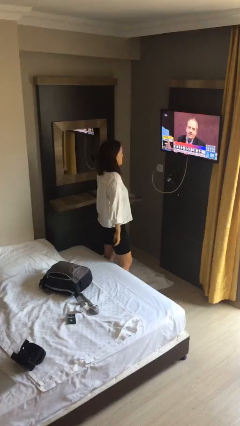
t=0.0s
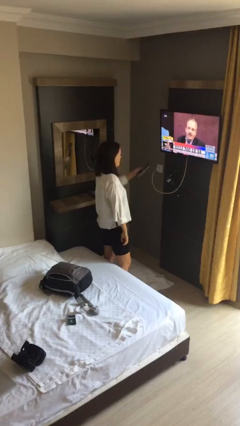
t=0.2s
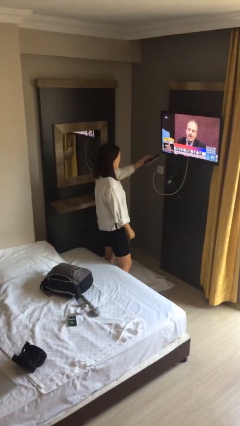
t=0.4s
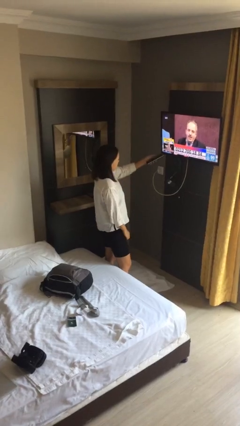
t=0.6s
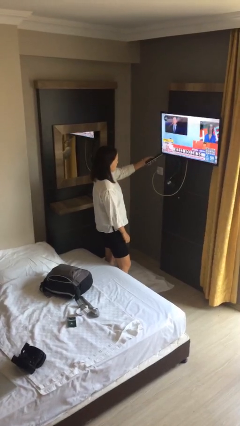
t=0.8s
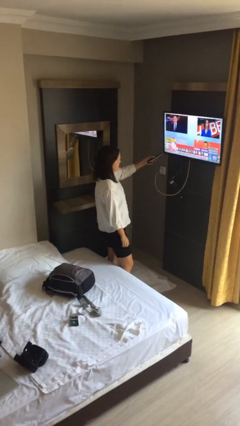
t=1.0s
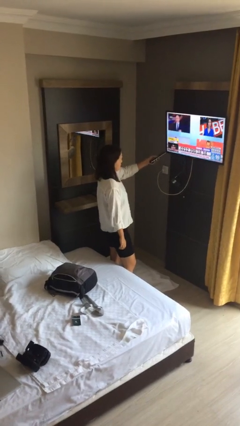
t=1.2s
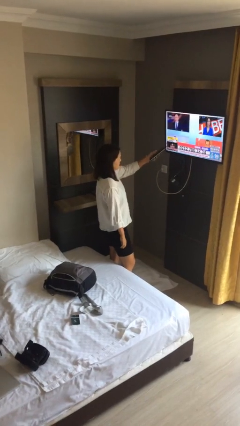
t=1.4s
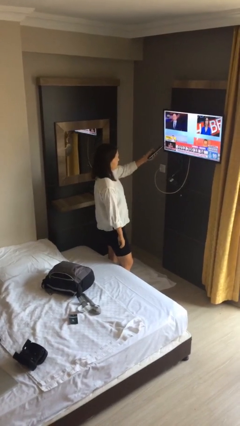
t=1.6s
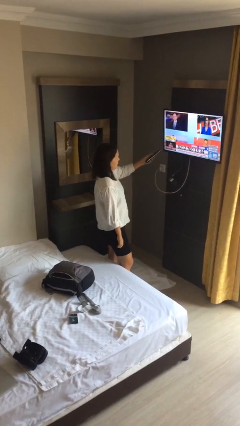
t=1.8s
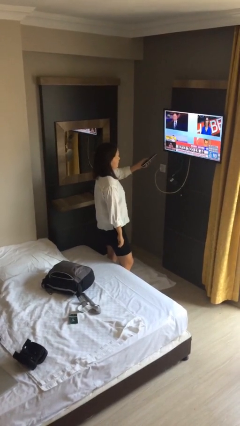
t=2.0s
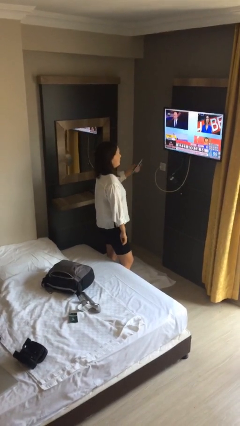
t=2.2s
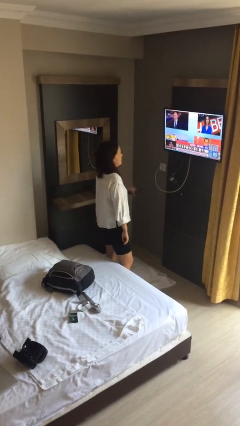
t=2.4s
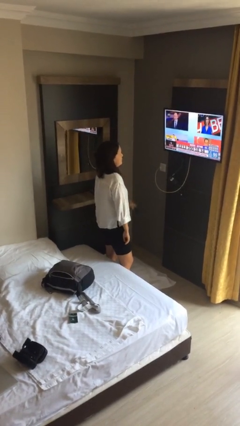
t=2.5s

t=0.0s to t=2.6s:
person uses television remote

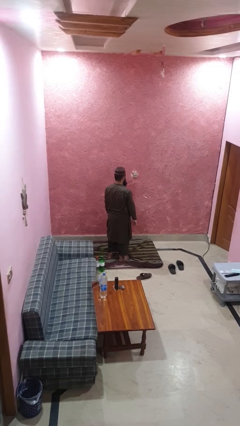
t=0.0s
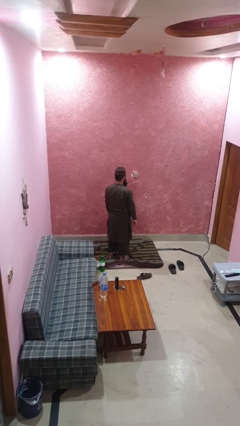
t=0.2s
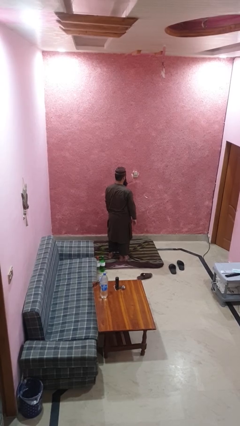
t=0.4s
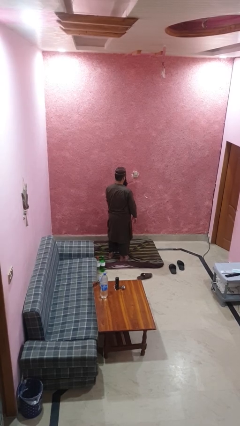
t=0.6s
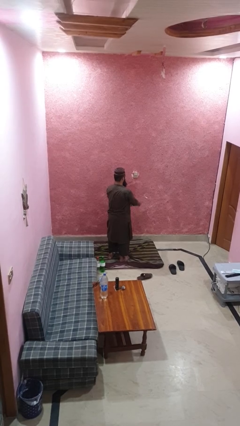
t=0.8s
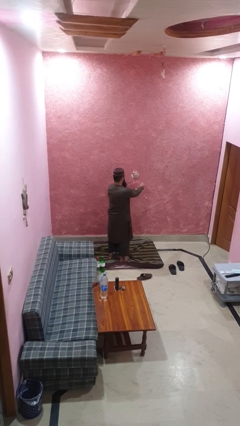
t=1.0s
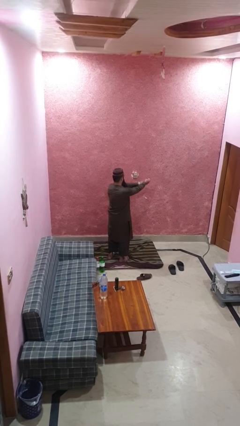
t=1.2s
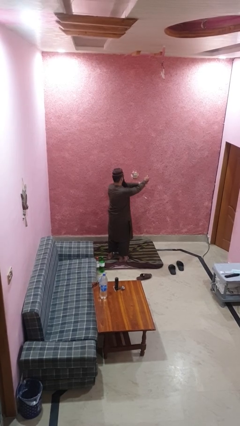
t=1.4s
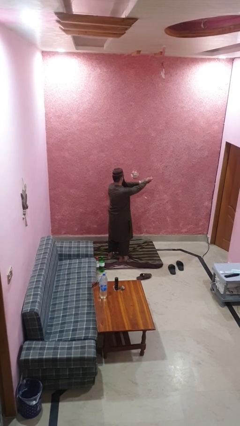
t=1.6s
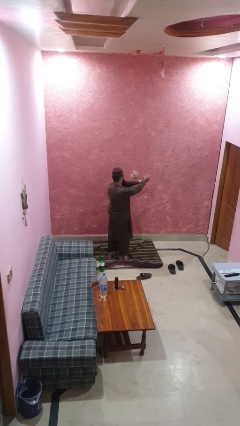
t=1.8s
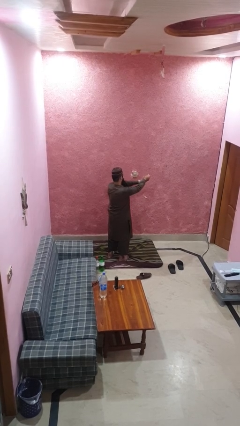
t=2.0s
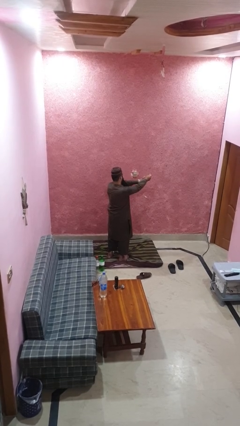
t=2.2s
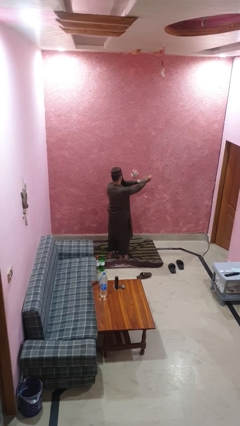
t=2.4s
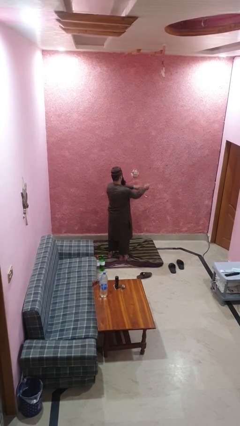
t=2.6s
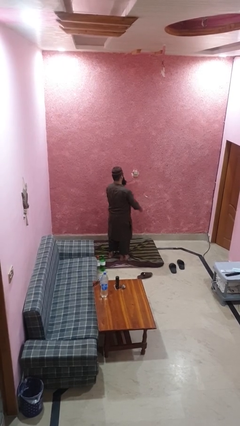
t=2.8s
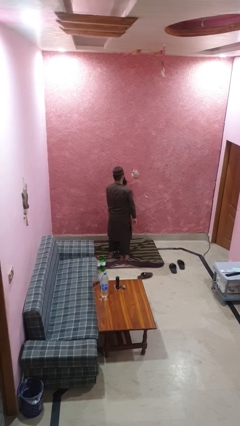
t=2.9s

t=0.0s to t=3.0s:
person snaps fingers

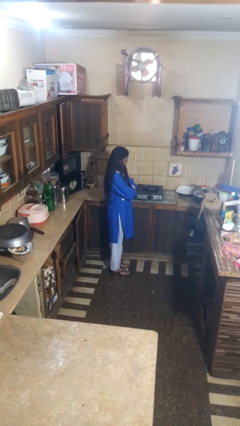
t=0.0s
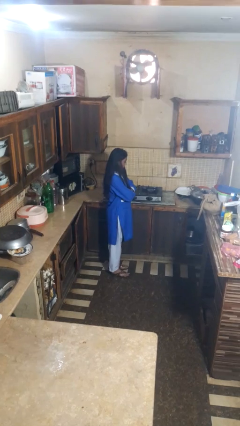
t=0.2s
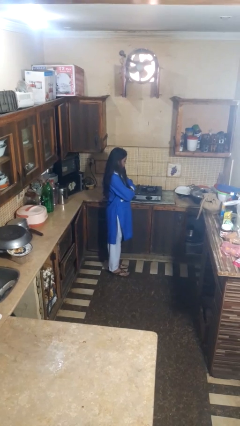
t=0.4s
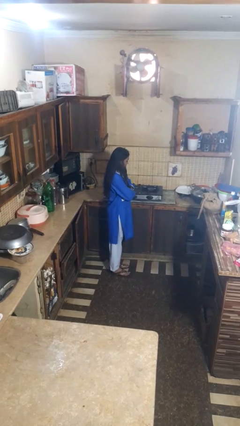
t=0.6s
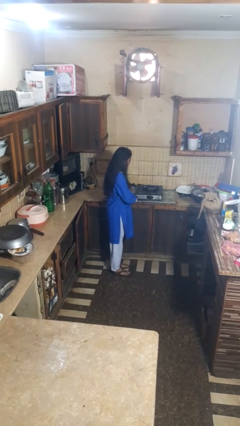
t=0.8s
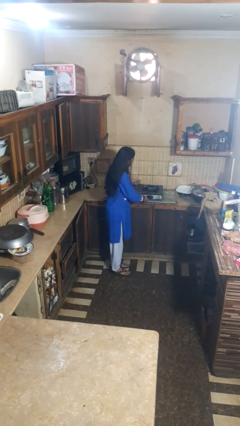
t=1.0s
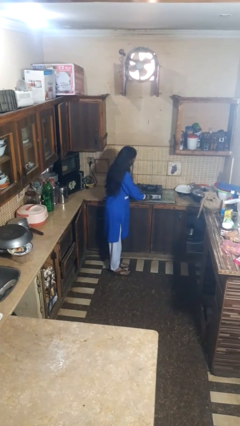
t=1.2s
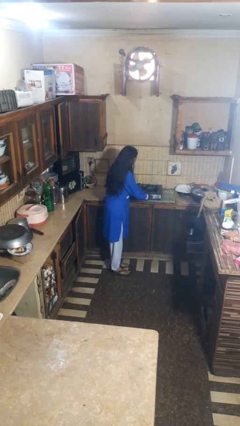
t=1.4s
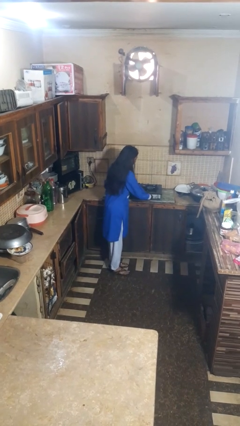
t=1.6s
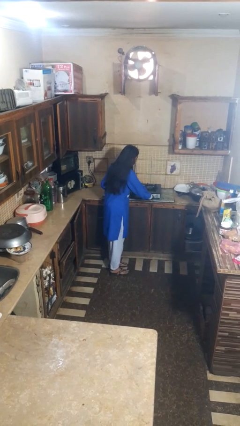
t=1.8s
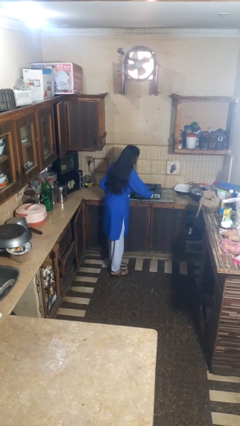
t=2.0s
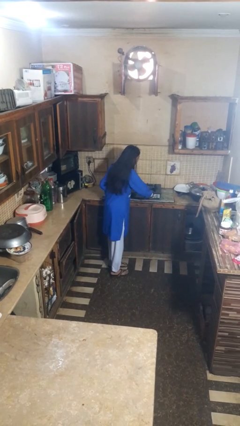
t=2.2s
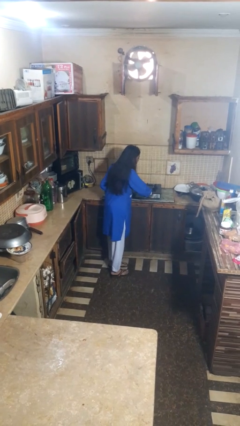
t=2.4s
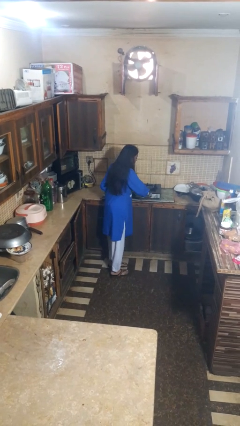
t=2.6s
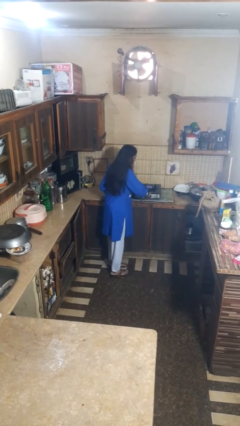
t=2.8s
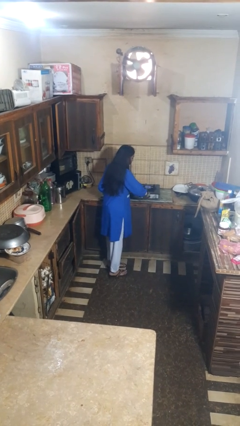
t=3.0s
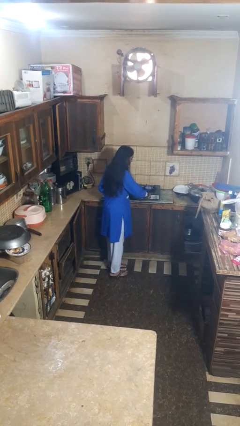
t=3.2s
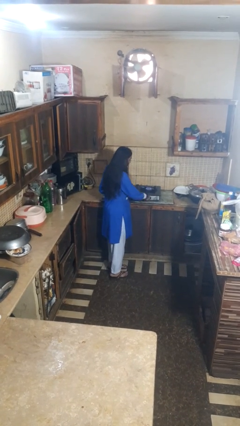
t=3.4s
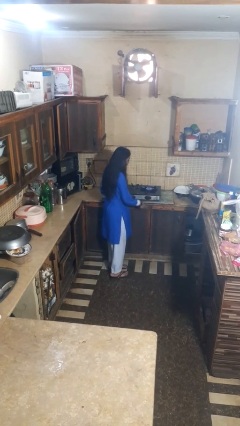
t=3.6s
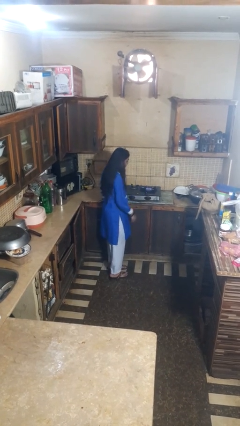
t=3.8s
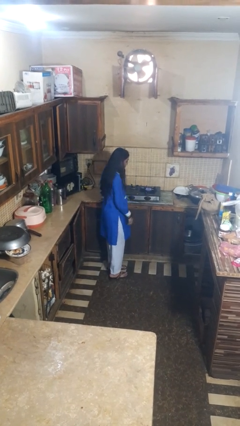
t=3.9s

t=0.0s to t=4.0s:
person turns on stovetop

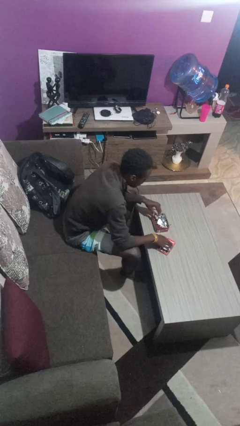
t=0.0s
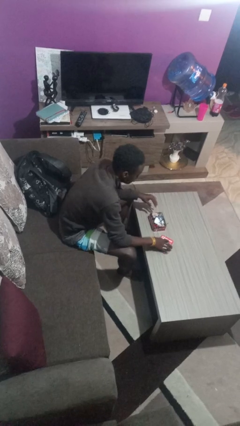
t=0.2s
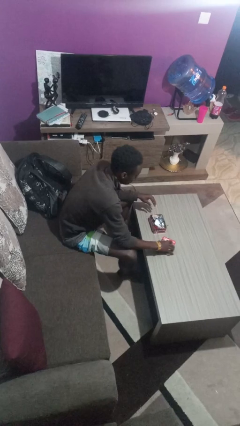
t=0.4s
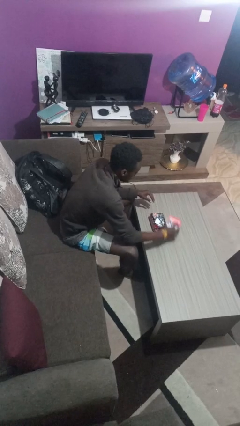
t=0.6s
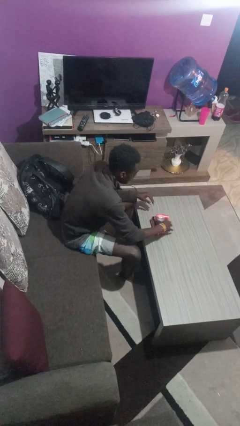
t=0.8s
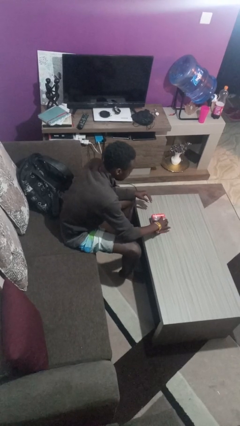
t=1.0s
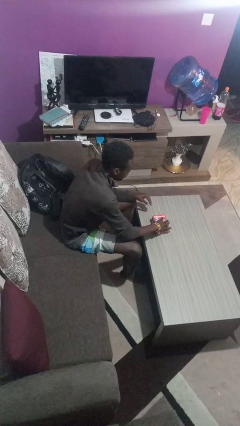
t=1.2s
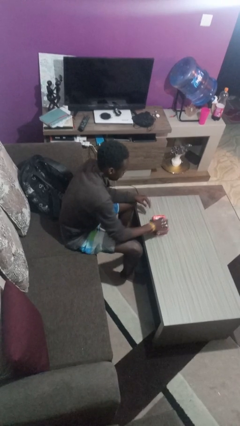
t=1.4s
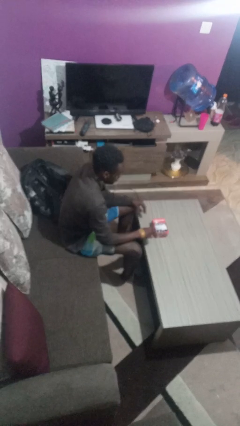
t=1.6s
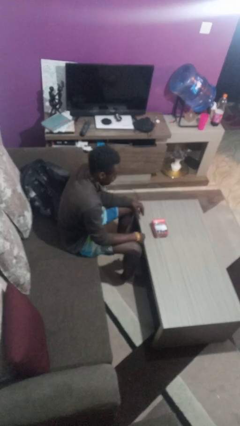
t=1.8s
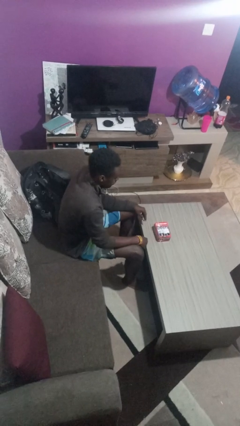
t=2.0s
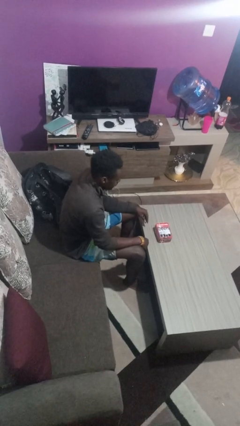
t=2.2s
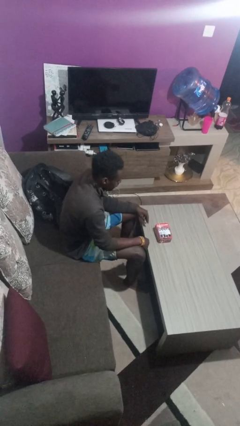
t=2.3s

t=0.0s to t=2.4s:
person closes jewelry box

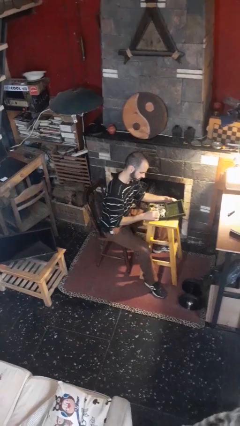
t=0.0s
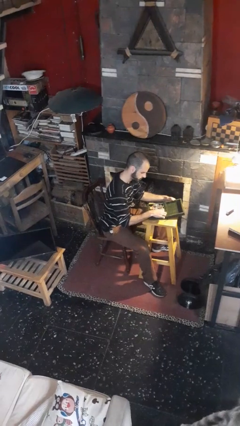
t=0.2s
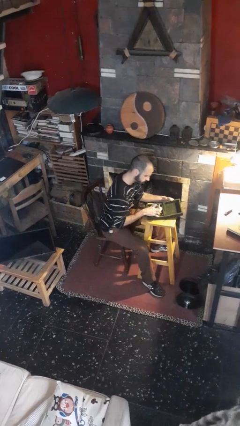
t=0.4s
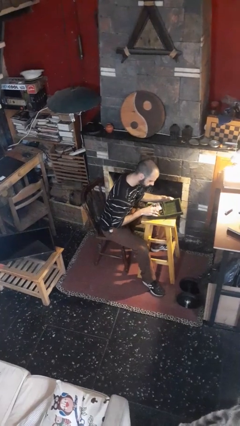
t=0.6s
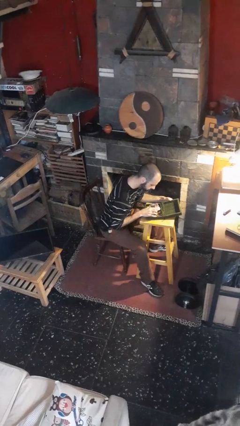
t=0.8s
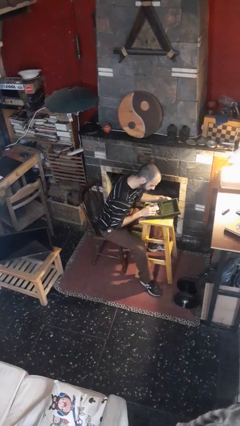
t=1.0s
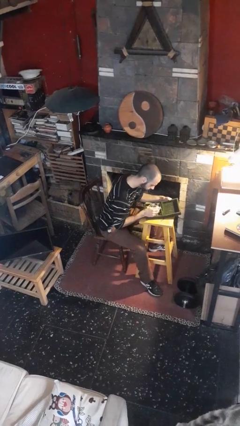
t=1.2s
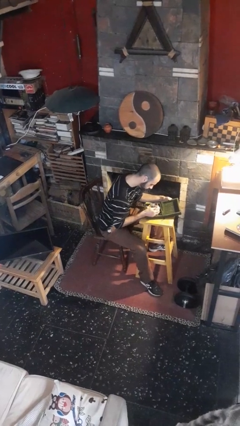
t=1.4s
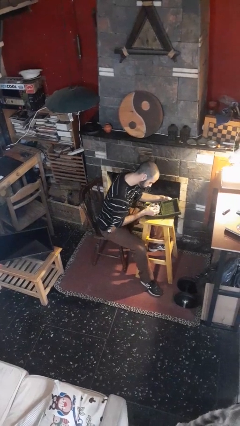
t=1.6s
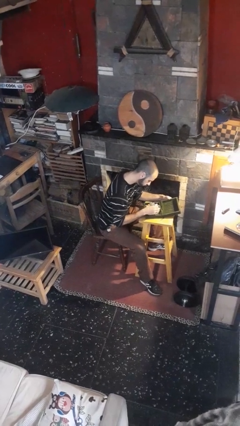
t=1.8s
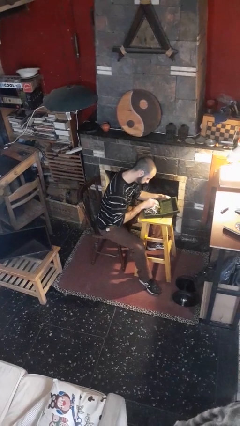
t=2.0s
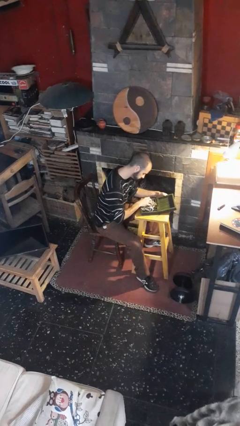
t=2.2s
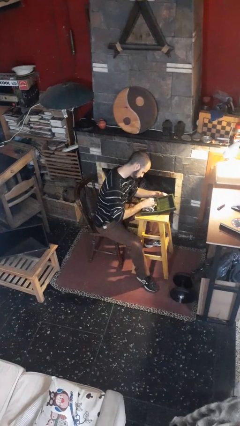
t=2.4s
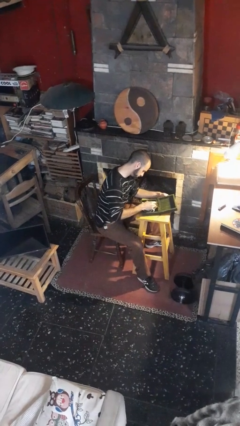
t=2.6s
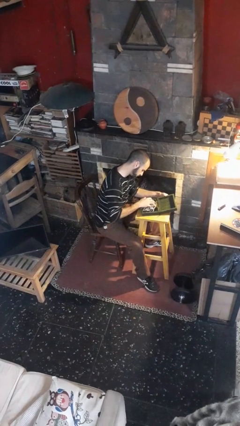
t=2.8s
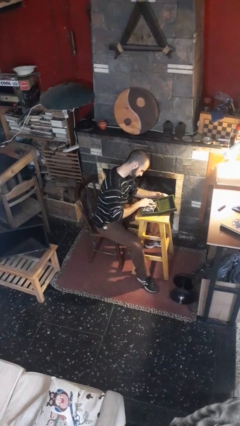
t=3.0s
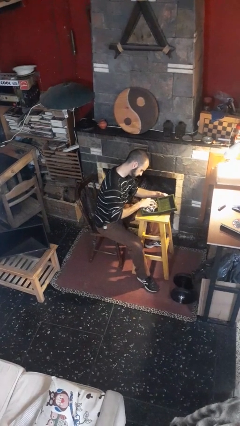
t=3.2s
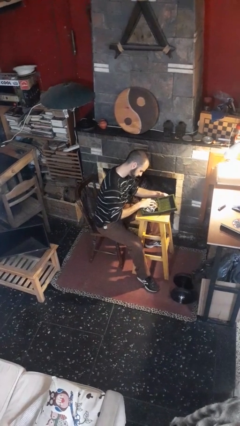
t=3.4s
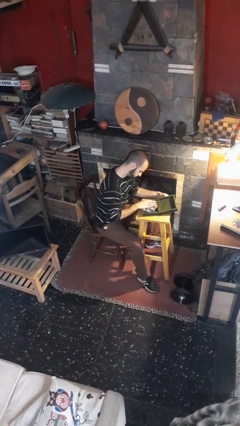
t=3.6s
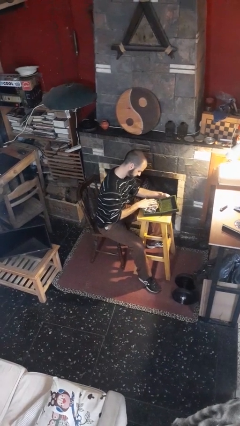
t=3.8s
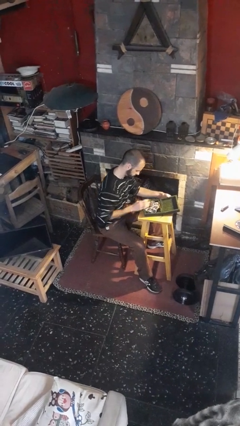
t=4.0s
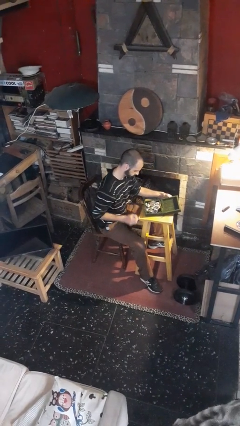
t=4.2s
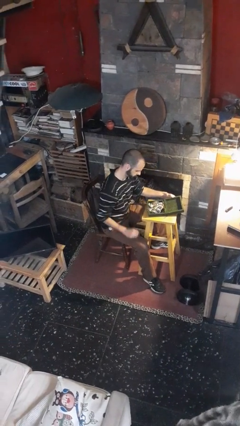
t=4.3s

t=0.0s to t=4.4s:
person searches jewelry box

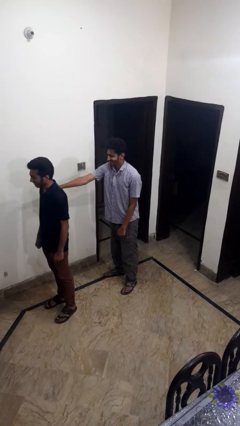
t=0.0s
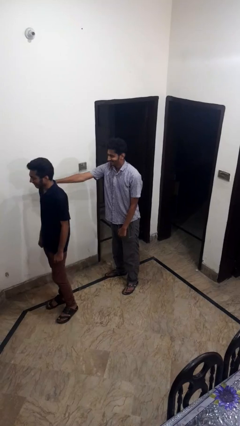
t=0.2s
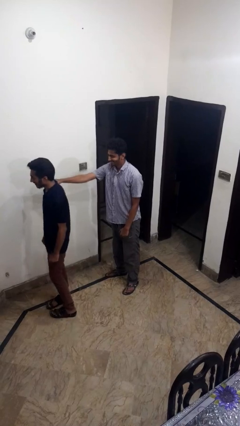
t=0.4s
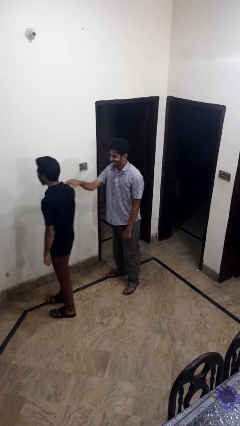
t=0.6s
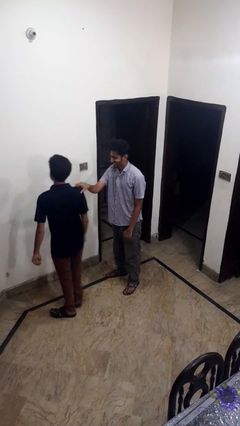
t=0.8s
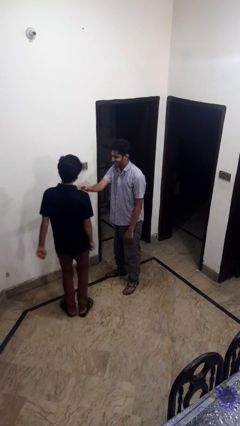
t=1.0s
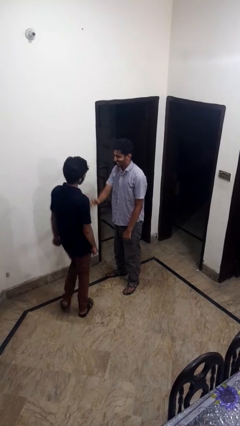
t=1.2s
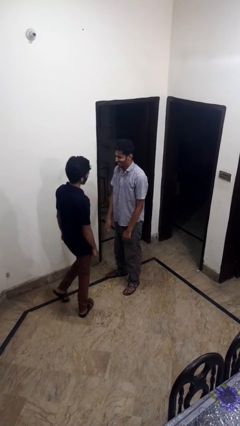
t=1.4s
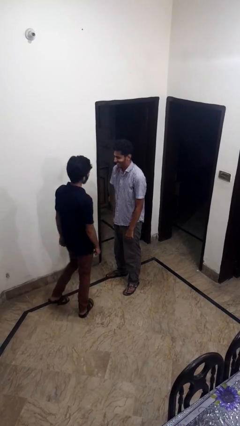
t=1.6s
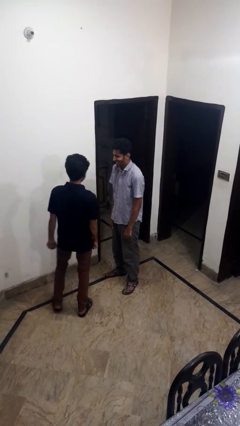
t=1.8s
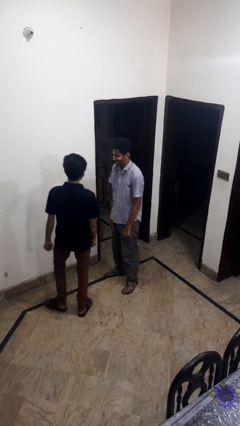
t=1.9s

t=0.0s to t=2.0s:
person spins person around
